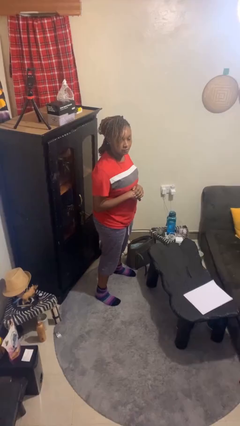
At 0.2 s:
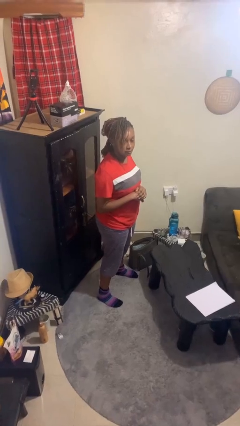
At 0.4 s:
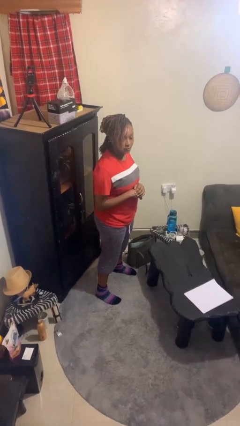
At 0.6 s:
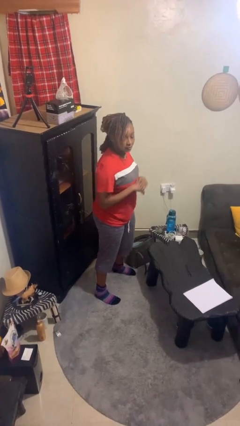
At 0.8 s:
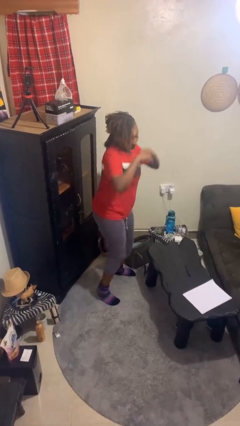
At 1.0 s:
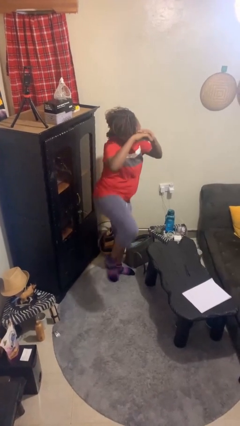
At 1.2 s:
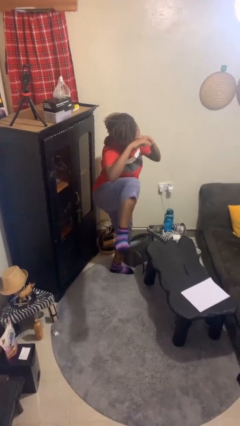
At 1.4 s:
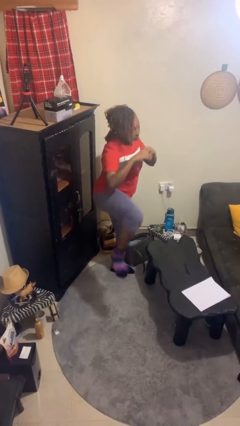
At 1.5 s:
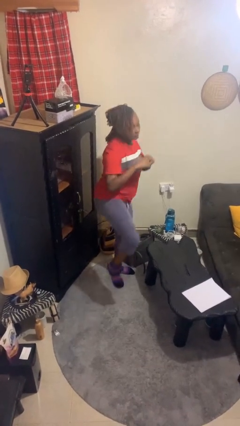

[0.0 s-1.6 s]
person karate kicks

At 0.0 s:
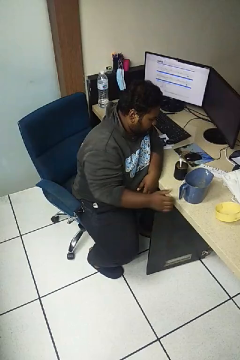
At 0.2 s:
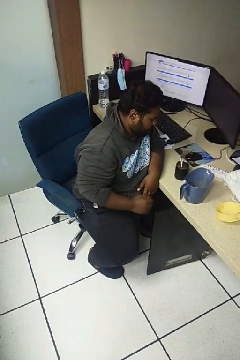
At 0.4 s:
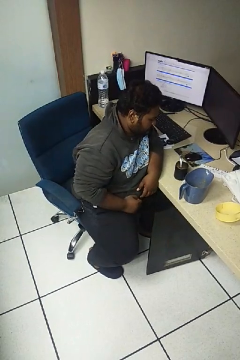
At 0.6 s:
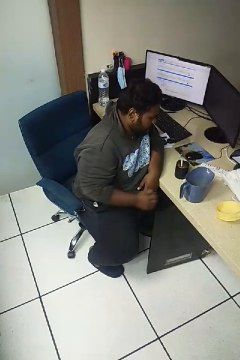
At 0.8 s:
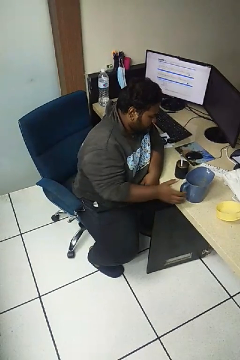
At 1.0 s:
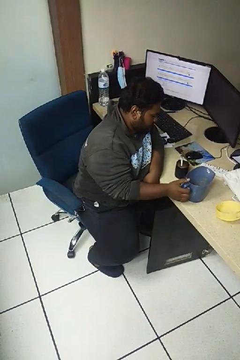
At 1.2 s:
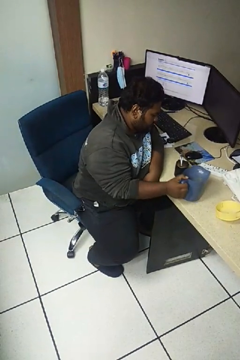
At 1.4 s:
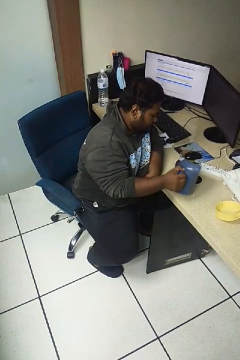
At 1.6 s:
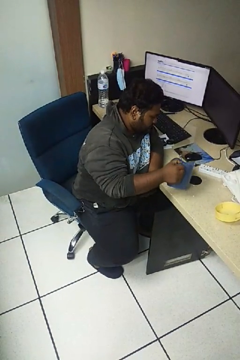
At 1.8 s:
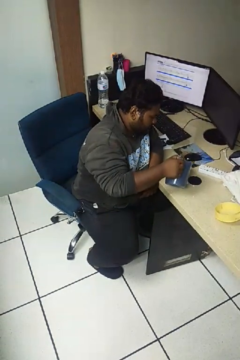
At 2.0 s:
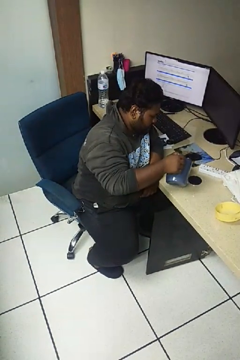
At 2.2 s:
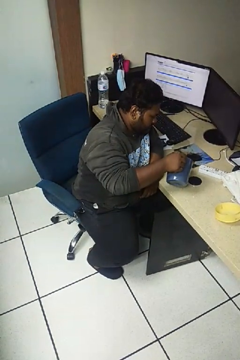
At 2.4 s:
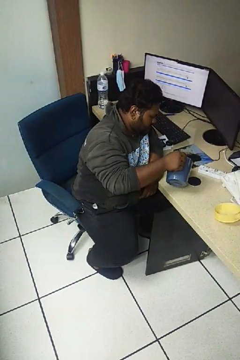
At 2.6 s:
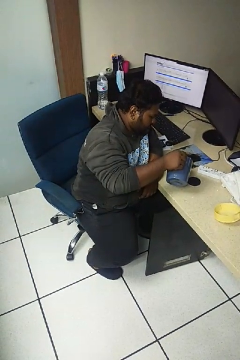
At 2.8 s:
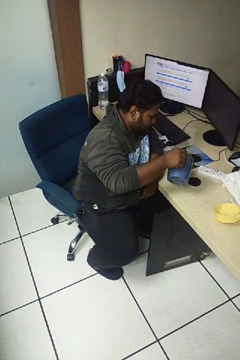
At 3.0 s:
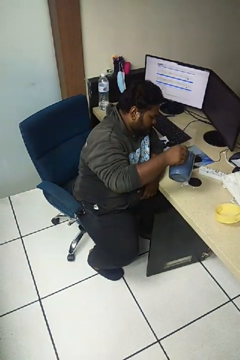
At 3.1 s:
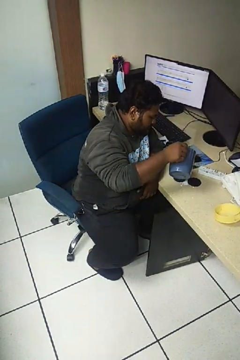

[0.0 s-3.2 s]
person pours coffee into mug

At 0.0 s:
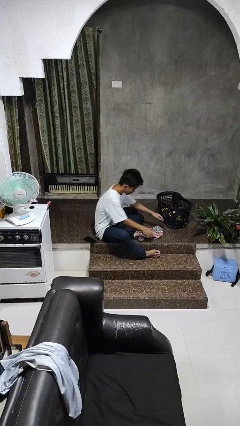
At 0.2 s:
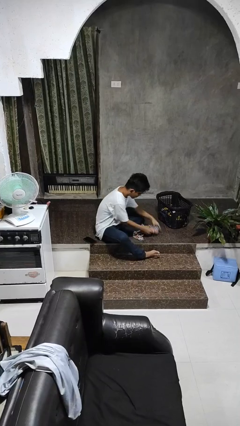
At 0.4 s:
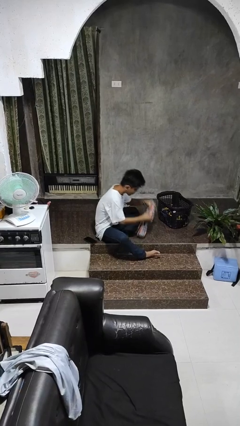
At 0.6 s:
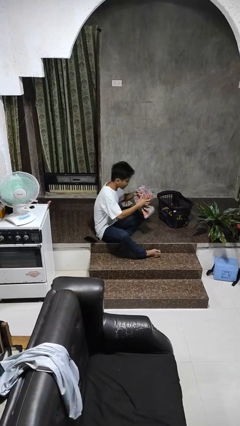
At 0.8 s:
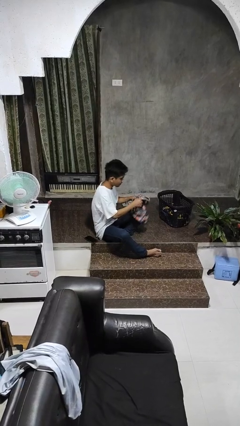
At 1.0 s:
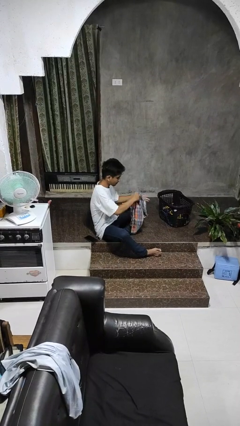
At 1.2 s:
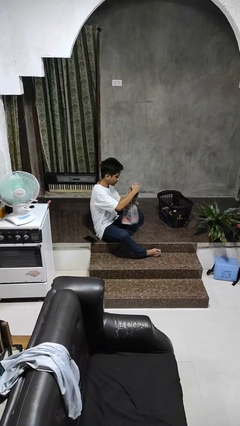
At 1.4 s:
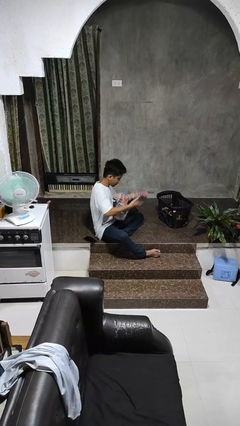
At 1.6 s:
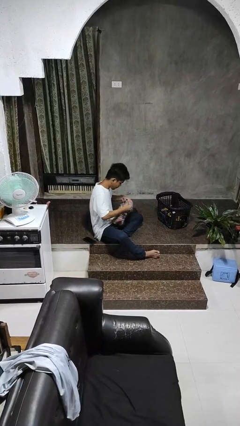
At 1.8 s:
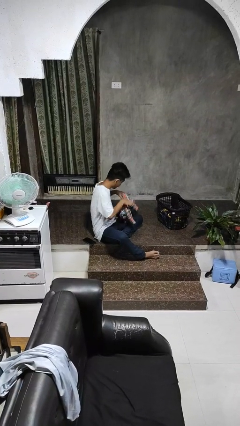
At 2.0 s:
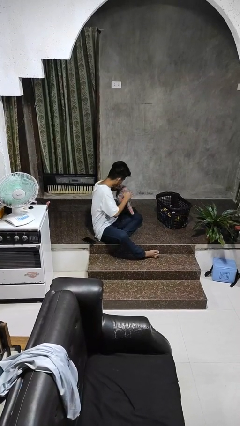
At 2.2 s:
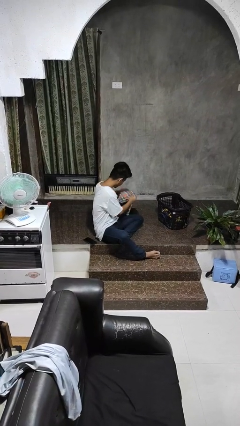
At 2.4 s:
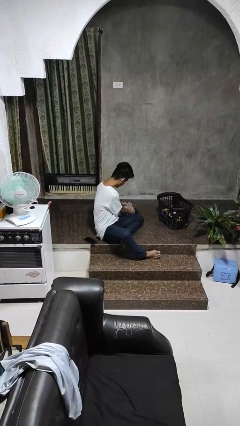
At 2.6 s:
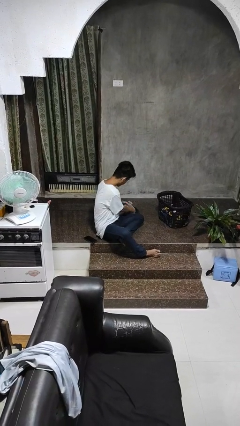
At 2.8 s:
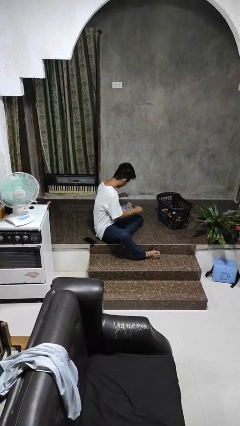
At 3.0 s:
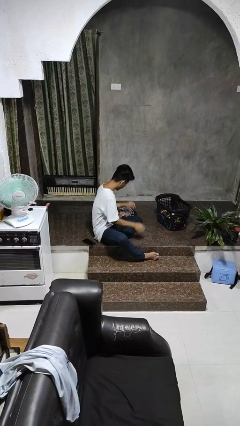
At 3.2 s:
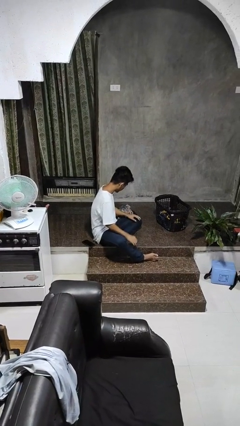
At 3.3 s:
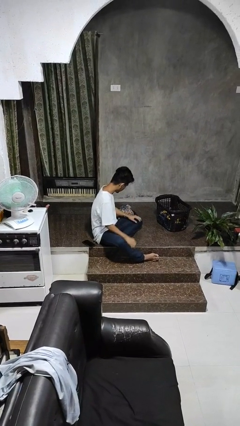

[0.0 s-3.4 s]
person folds pants

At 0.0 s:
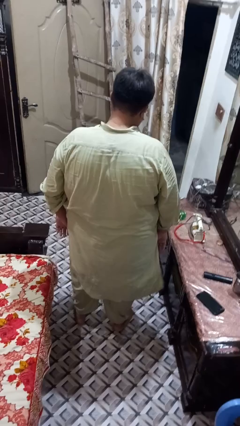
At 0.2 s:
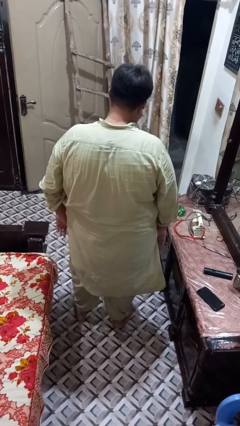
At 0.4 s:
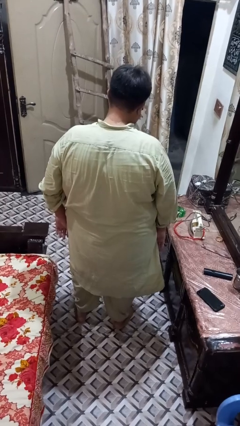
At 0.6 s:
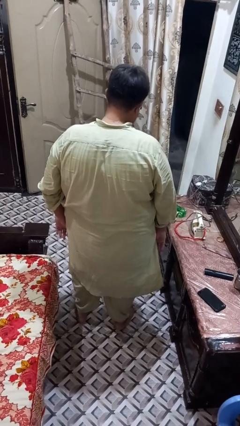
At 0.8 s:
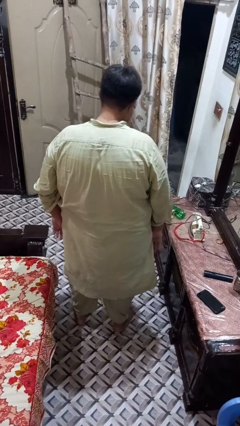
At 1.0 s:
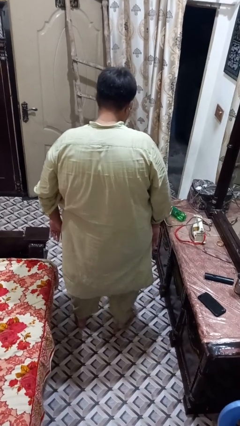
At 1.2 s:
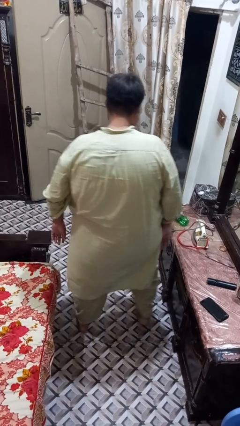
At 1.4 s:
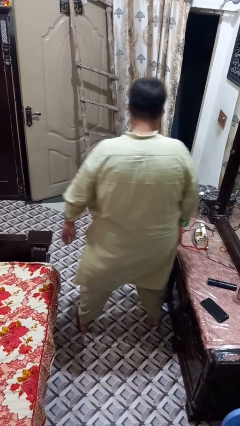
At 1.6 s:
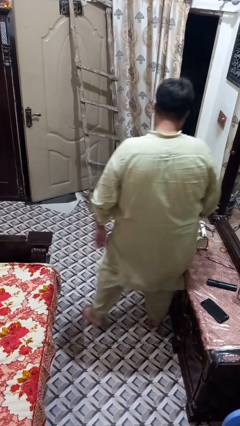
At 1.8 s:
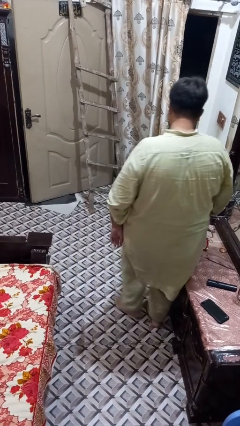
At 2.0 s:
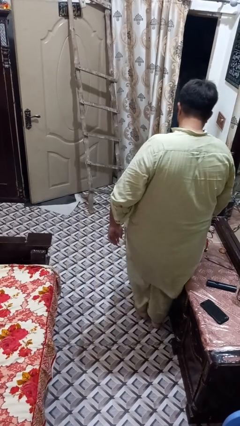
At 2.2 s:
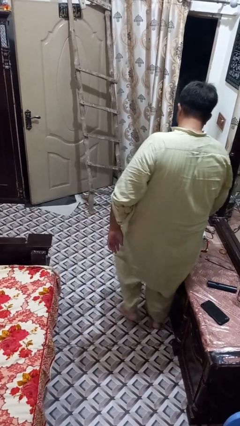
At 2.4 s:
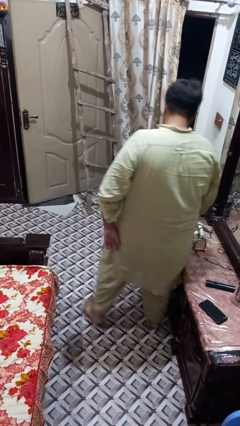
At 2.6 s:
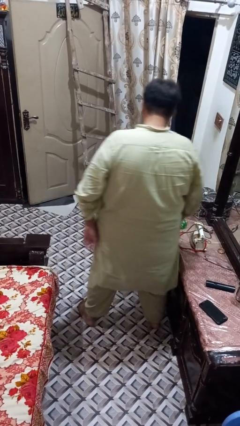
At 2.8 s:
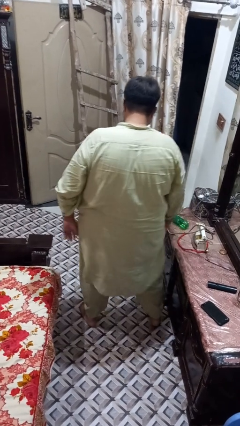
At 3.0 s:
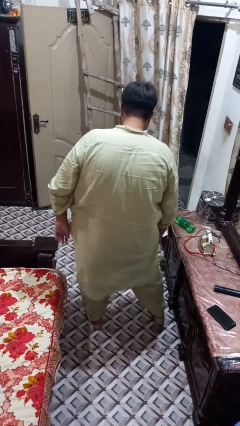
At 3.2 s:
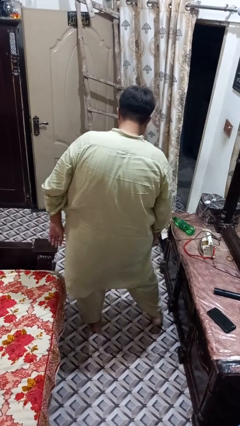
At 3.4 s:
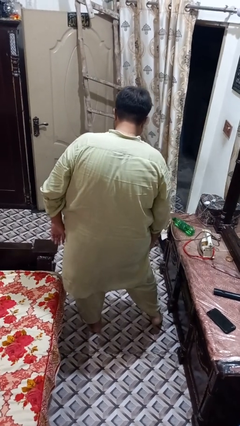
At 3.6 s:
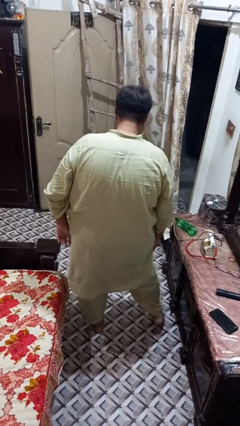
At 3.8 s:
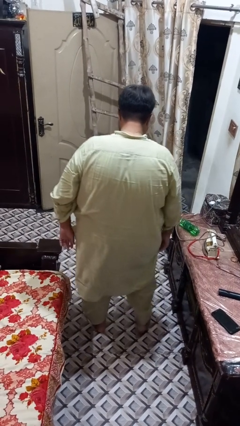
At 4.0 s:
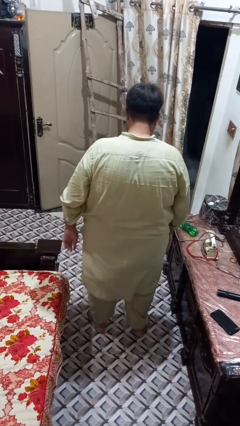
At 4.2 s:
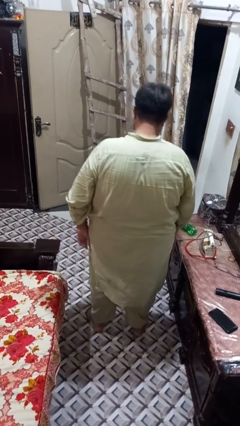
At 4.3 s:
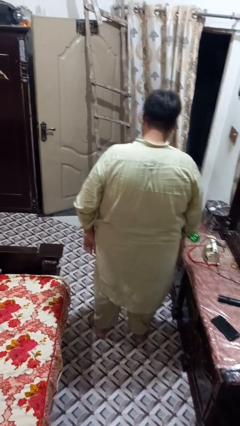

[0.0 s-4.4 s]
person bumps into table

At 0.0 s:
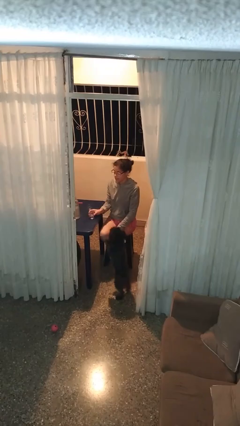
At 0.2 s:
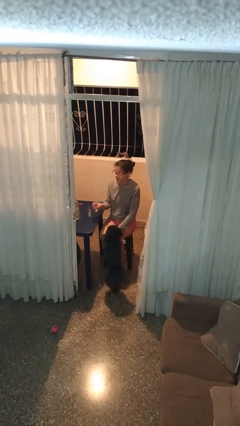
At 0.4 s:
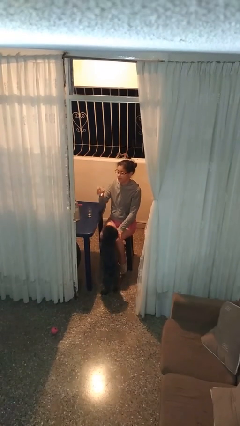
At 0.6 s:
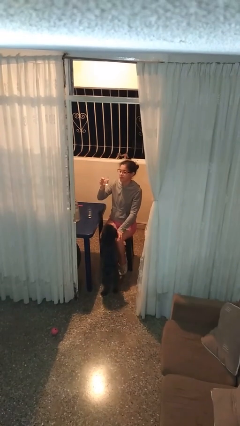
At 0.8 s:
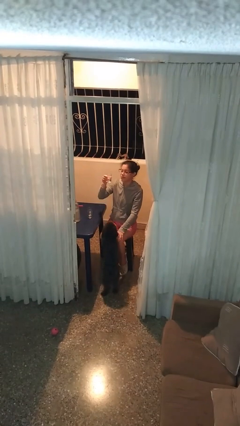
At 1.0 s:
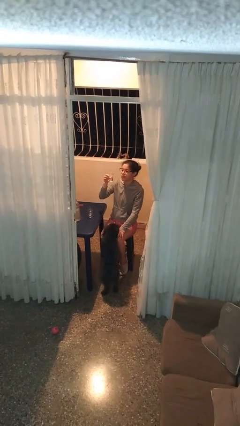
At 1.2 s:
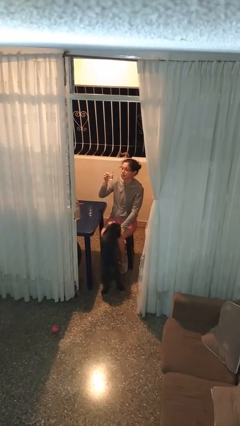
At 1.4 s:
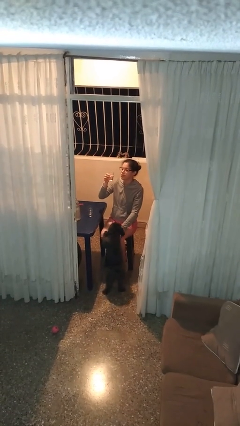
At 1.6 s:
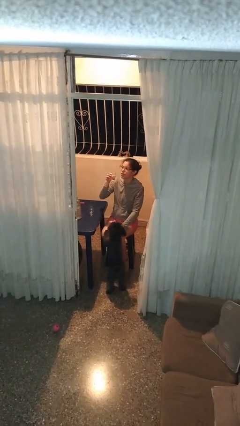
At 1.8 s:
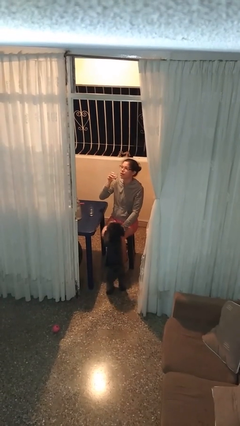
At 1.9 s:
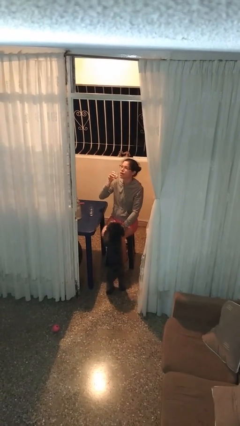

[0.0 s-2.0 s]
person picks up object from table

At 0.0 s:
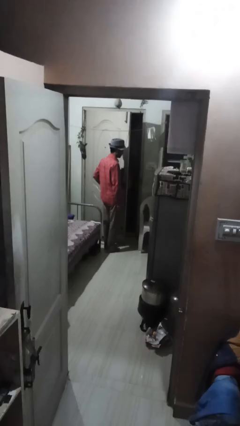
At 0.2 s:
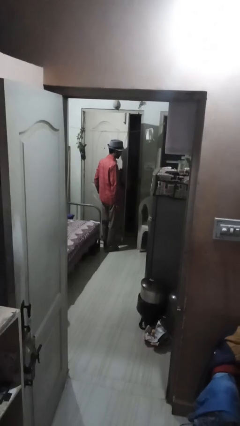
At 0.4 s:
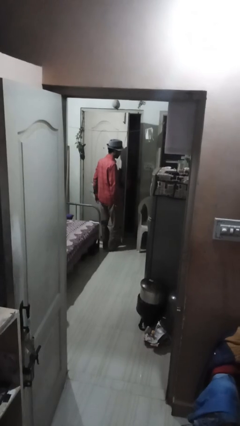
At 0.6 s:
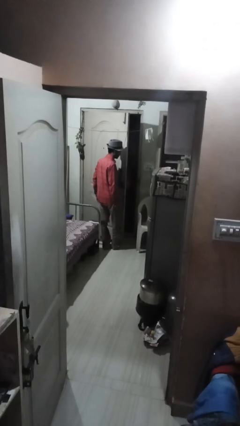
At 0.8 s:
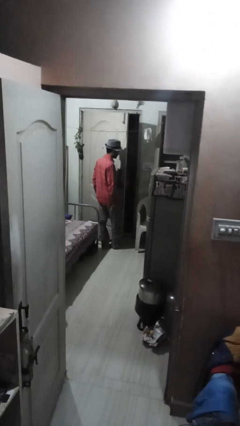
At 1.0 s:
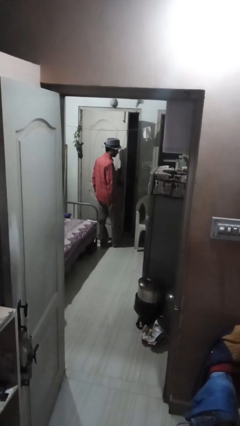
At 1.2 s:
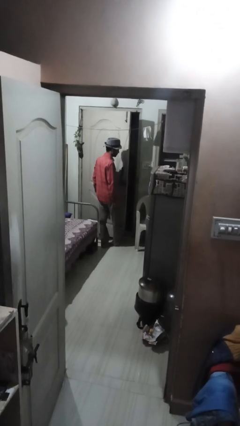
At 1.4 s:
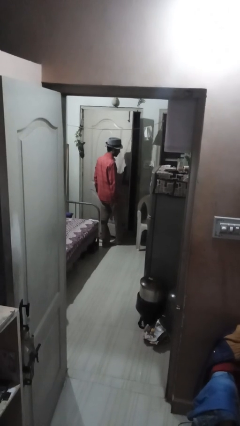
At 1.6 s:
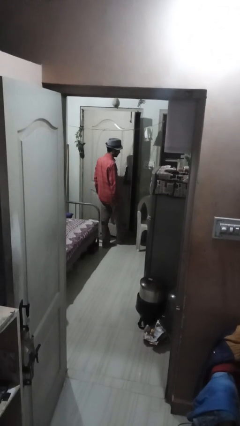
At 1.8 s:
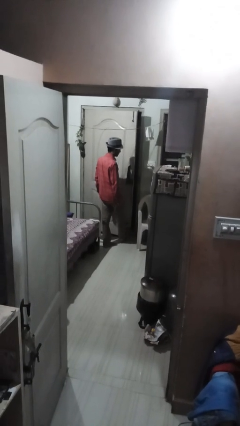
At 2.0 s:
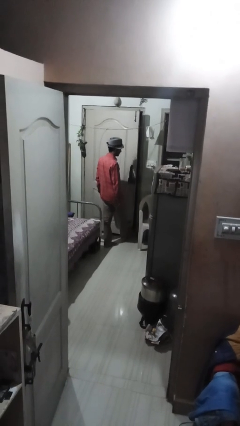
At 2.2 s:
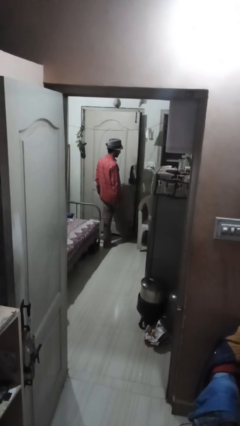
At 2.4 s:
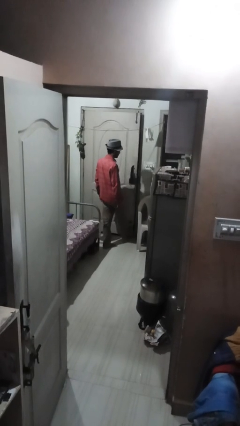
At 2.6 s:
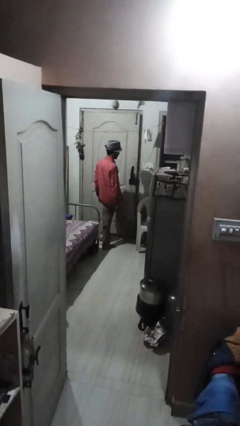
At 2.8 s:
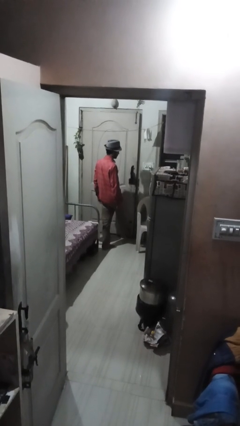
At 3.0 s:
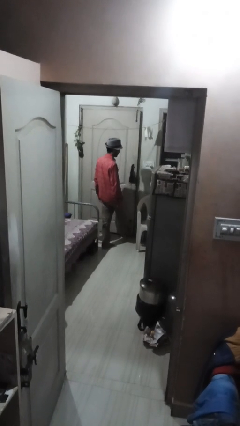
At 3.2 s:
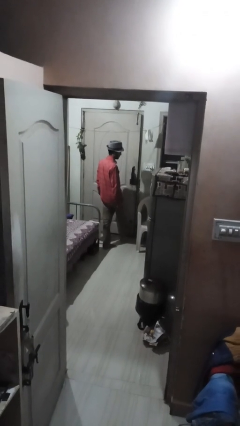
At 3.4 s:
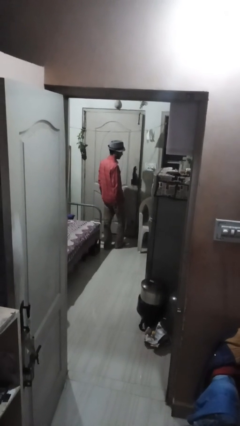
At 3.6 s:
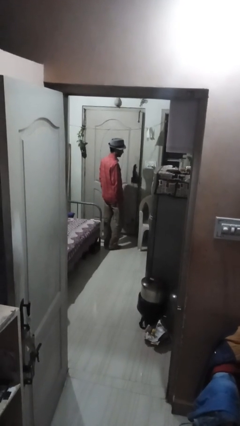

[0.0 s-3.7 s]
person closes door with foot

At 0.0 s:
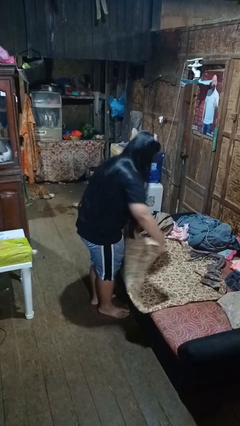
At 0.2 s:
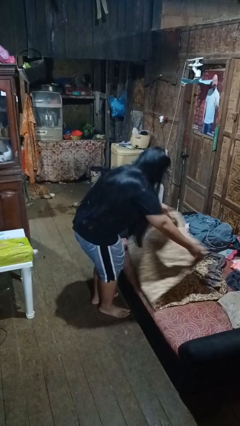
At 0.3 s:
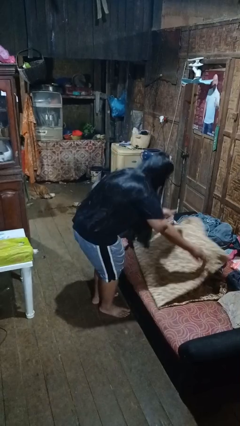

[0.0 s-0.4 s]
person folds blanket
